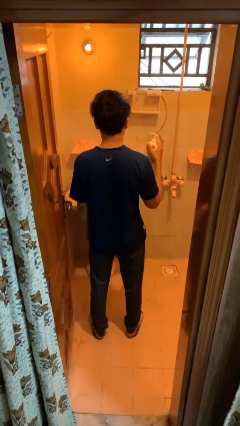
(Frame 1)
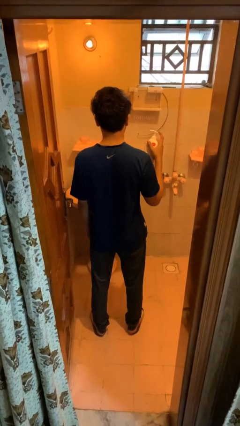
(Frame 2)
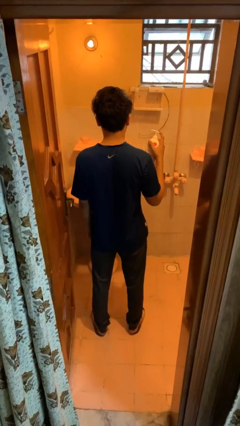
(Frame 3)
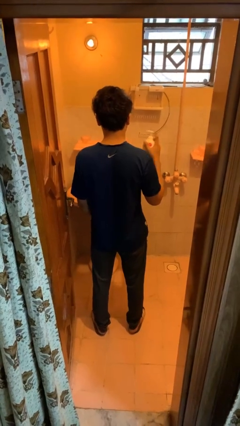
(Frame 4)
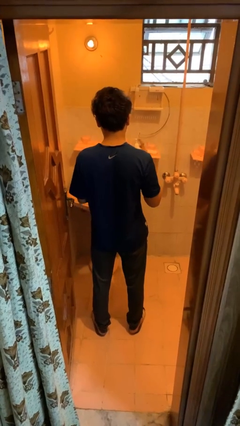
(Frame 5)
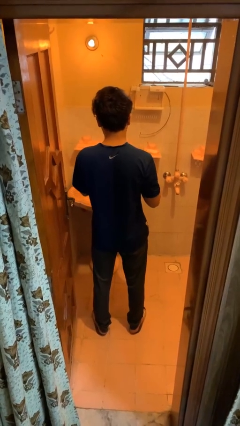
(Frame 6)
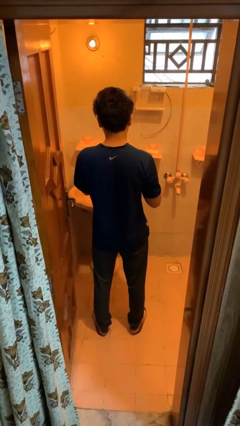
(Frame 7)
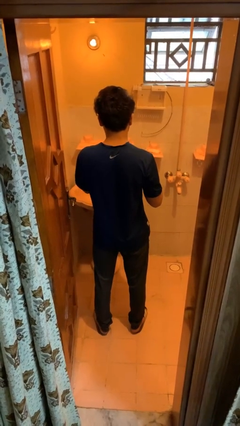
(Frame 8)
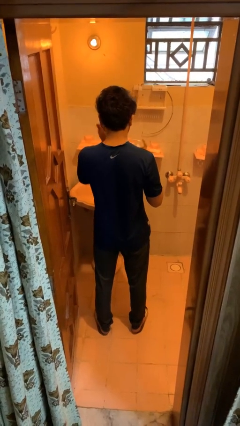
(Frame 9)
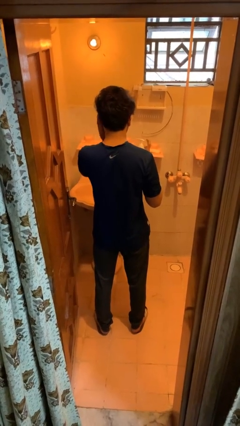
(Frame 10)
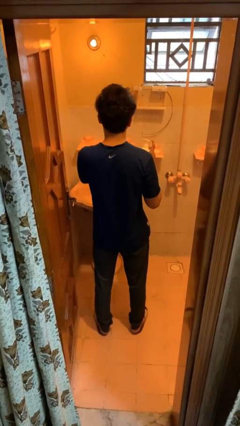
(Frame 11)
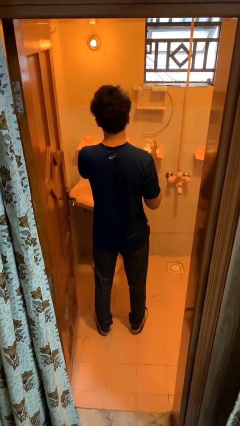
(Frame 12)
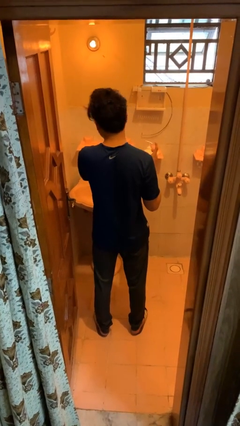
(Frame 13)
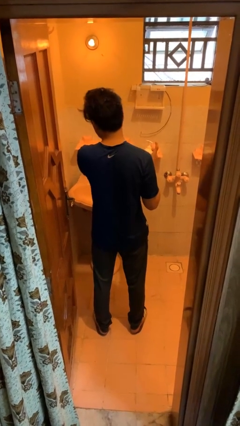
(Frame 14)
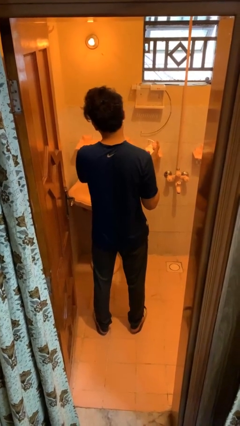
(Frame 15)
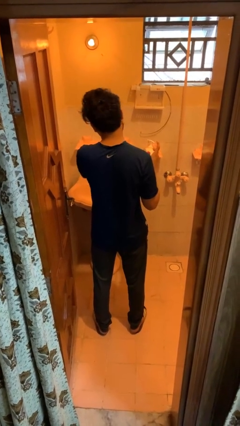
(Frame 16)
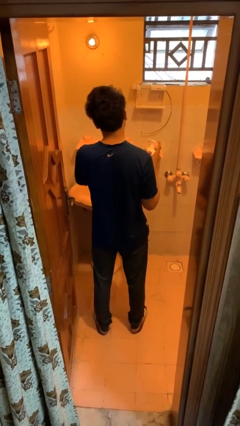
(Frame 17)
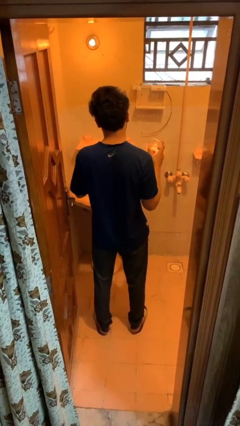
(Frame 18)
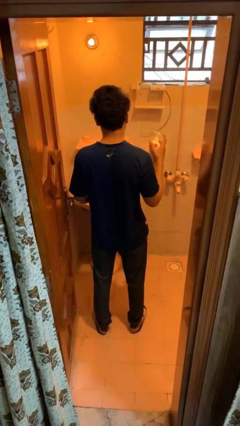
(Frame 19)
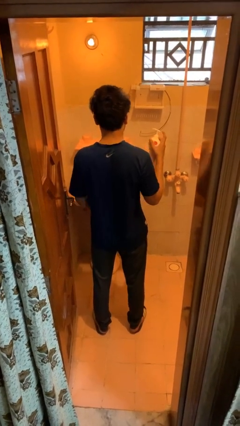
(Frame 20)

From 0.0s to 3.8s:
person applies sunscreen

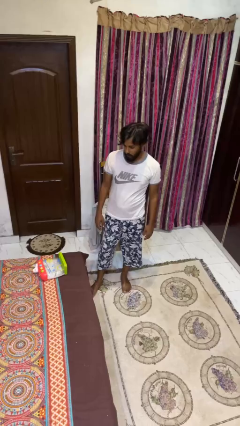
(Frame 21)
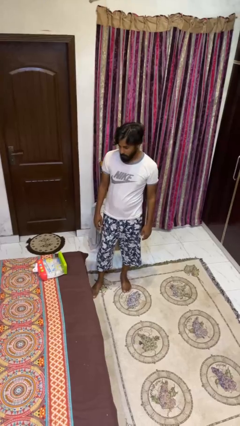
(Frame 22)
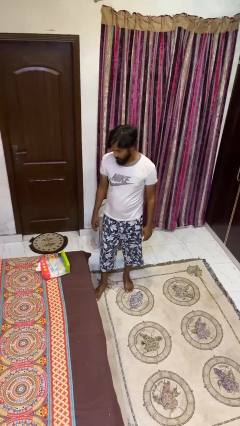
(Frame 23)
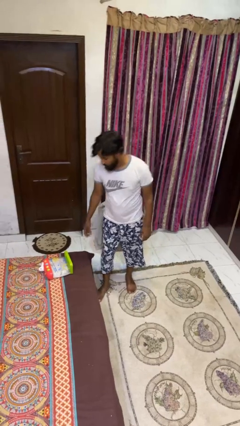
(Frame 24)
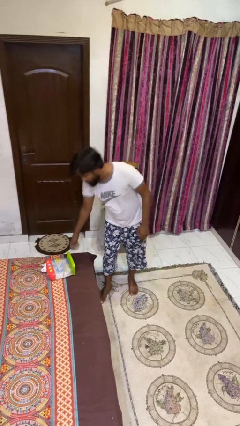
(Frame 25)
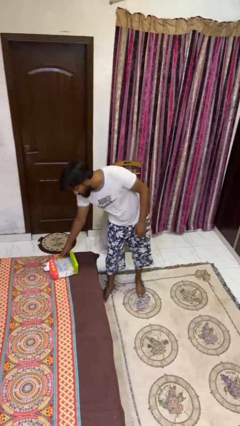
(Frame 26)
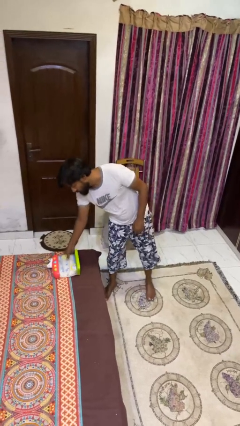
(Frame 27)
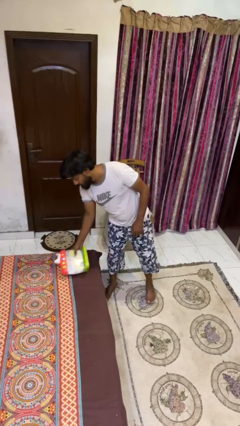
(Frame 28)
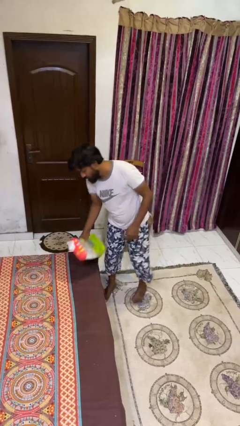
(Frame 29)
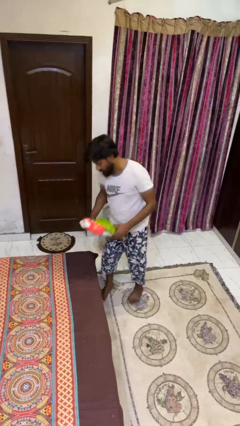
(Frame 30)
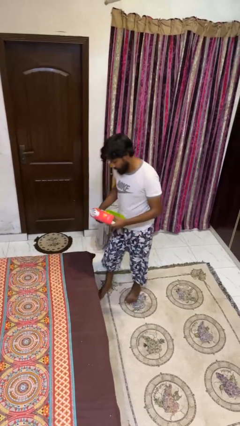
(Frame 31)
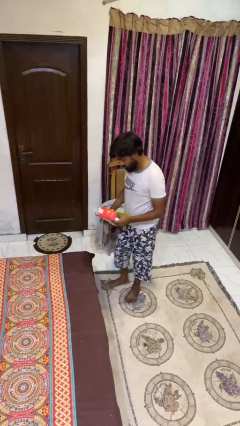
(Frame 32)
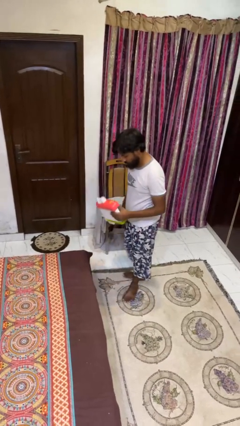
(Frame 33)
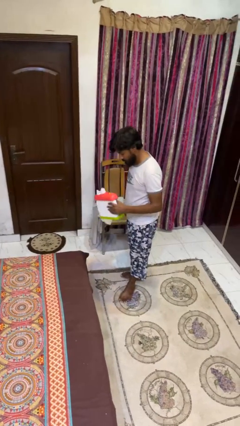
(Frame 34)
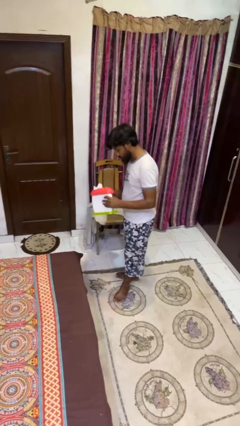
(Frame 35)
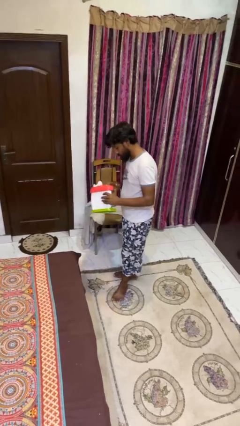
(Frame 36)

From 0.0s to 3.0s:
person picks up object from bed

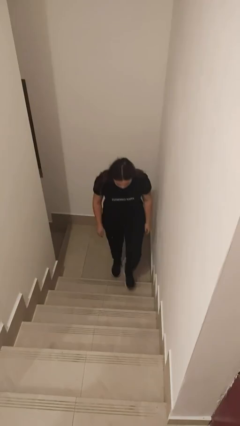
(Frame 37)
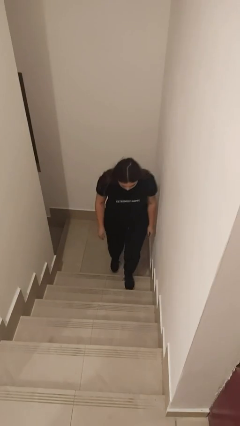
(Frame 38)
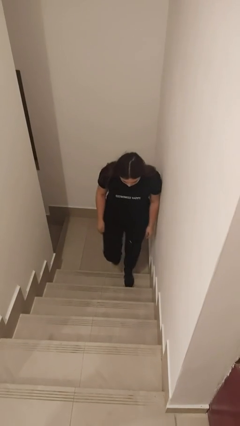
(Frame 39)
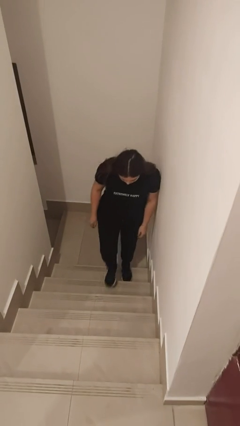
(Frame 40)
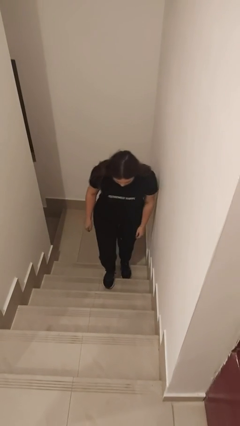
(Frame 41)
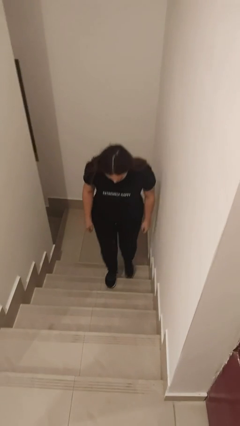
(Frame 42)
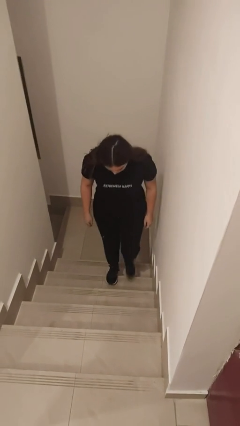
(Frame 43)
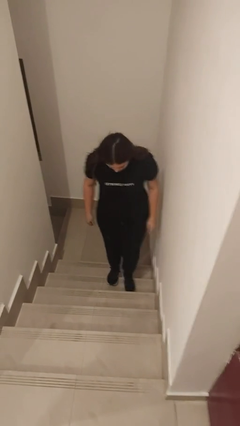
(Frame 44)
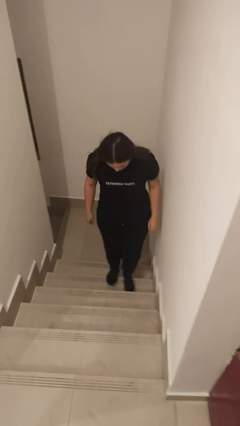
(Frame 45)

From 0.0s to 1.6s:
person climbs up stairs

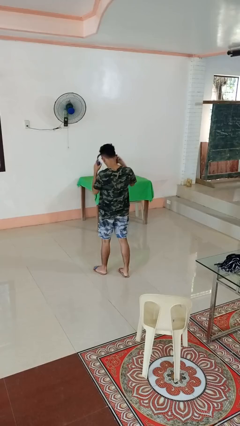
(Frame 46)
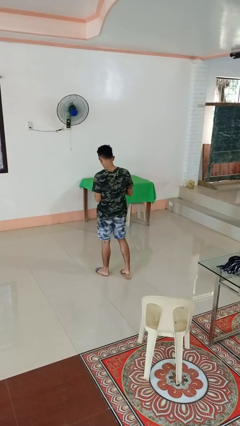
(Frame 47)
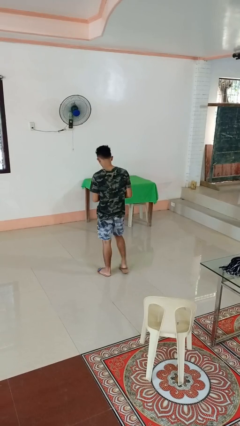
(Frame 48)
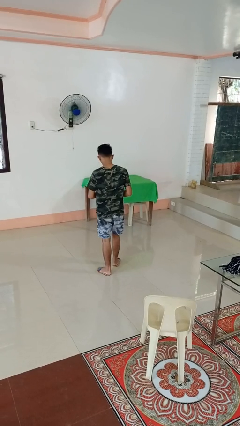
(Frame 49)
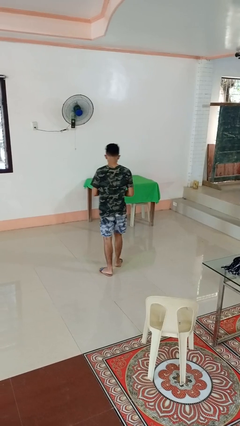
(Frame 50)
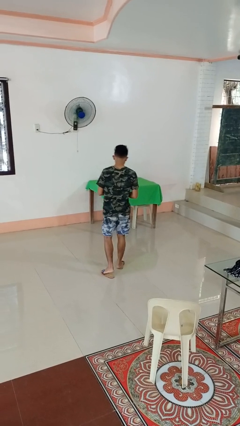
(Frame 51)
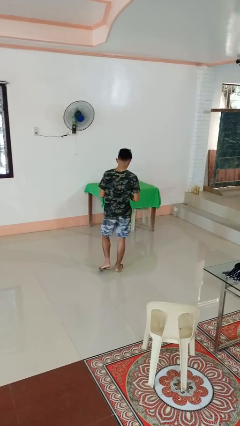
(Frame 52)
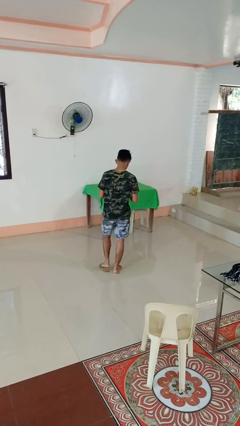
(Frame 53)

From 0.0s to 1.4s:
person takes off headphones

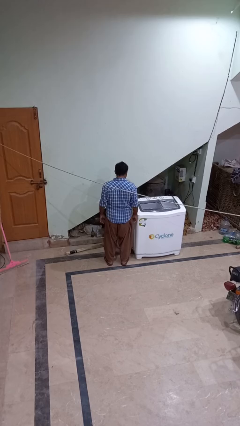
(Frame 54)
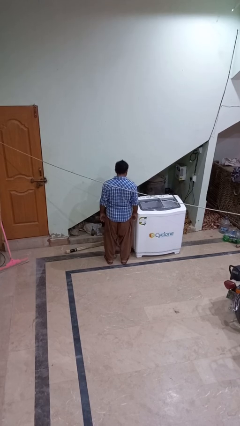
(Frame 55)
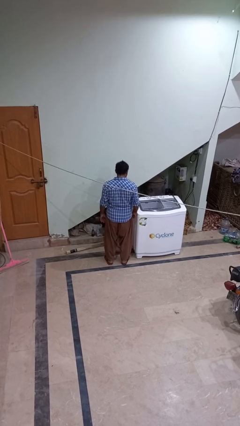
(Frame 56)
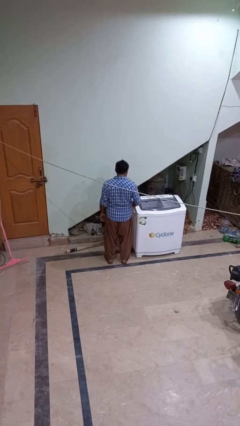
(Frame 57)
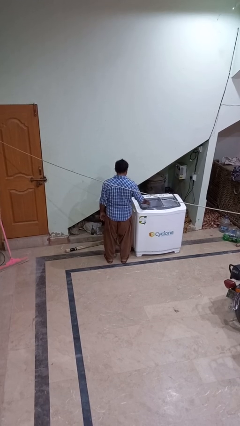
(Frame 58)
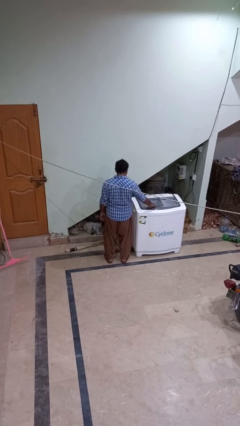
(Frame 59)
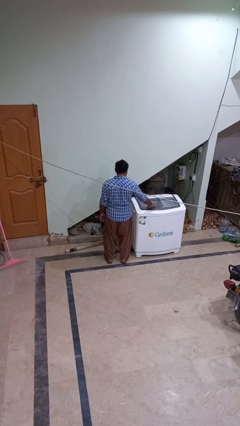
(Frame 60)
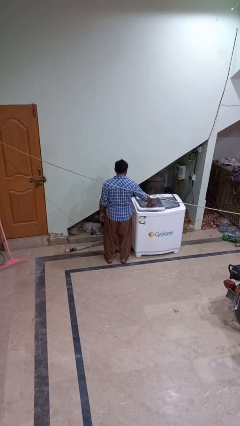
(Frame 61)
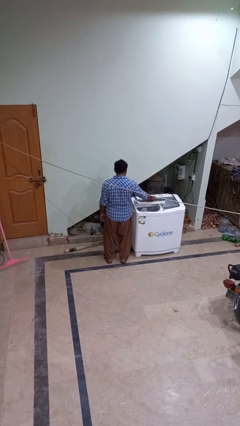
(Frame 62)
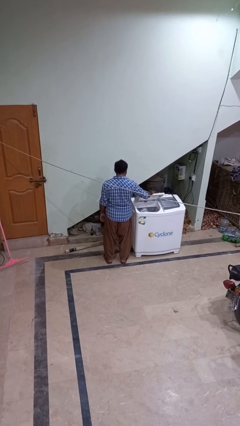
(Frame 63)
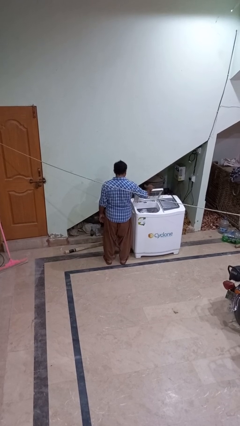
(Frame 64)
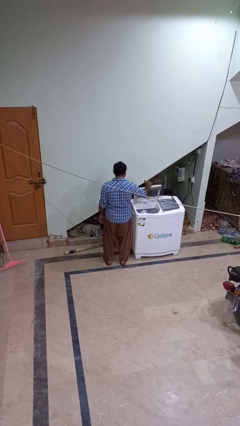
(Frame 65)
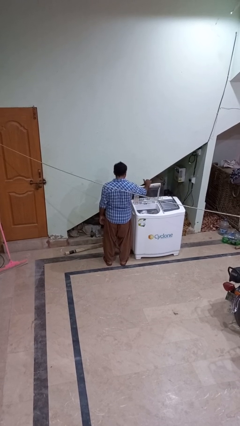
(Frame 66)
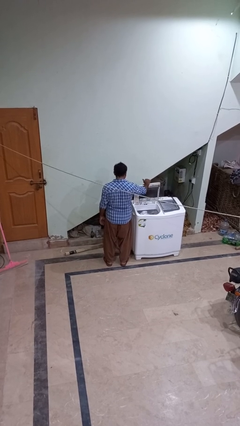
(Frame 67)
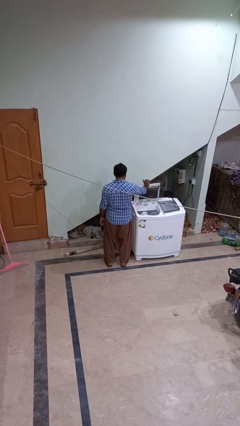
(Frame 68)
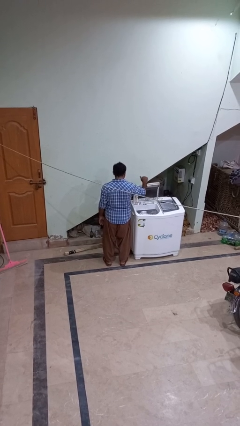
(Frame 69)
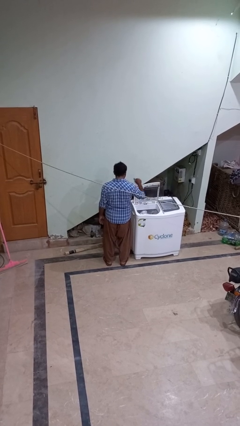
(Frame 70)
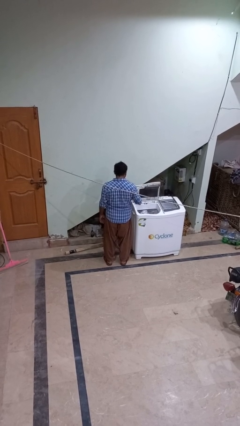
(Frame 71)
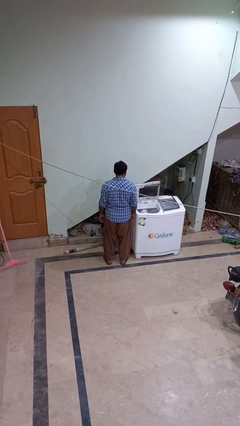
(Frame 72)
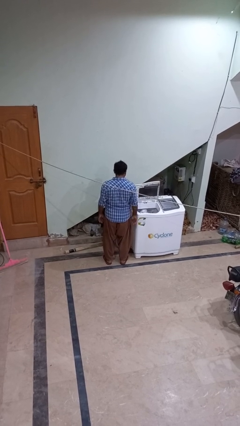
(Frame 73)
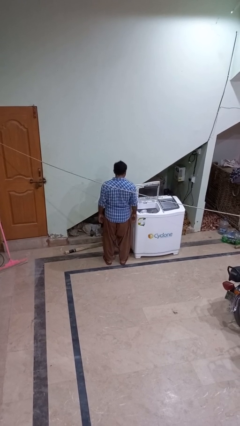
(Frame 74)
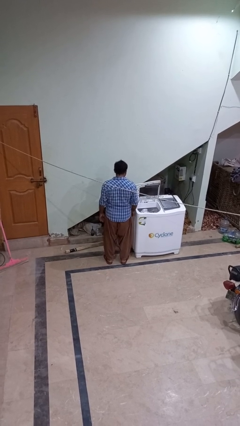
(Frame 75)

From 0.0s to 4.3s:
person opens clothes washer

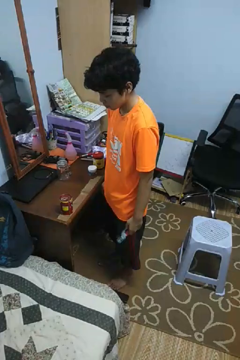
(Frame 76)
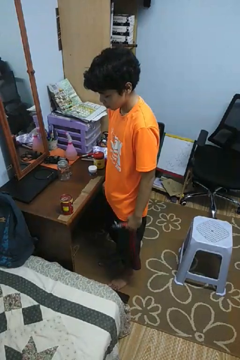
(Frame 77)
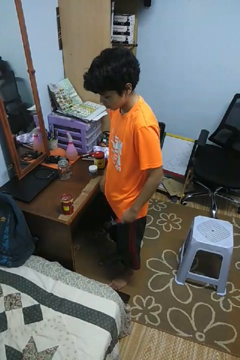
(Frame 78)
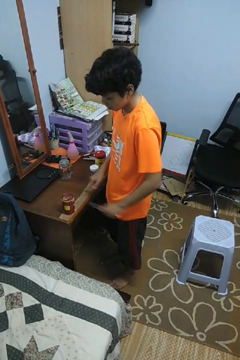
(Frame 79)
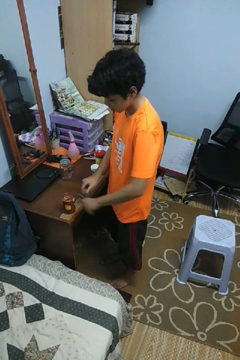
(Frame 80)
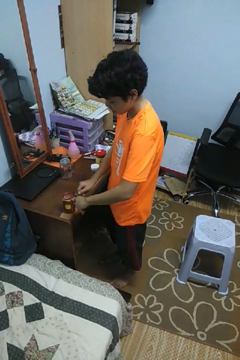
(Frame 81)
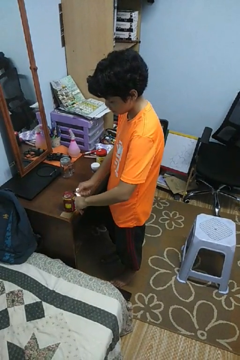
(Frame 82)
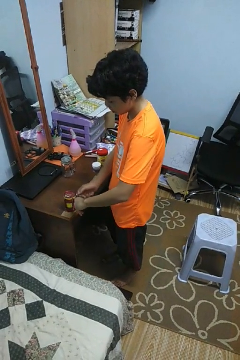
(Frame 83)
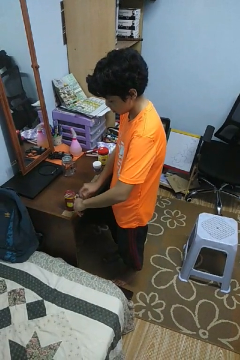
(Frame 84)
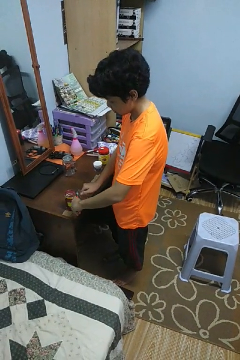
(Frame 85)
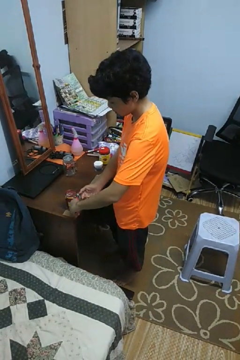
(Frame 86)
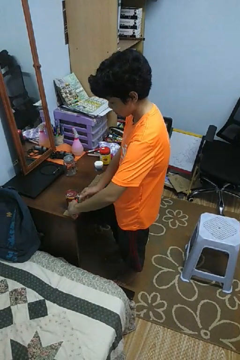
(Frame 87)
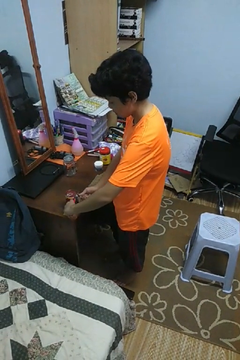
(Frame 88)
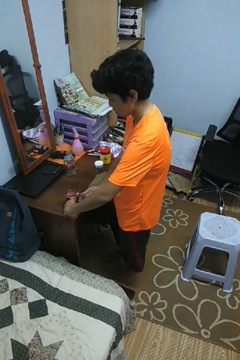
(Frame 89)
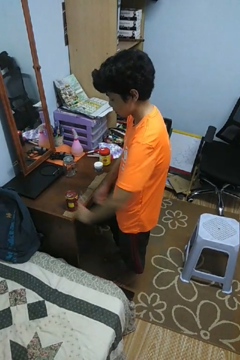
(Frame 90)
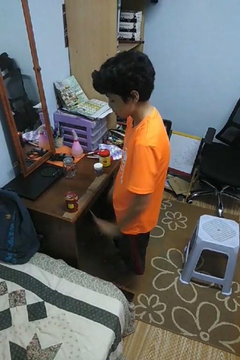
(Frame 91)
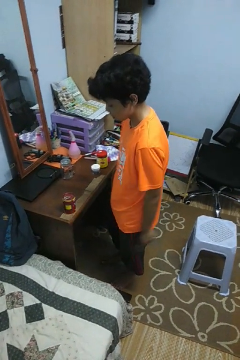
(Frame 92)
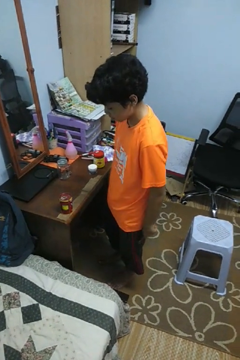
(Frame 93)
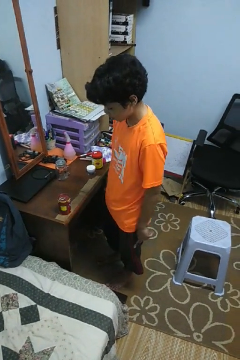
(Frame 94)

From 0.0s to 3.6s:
person opens can with can opener
